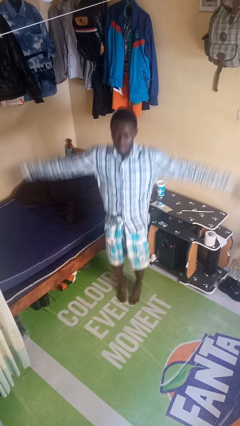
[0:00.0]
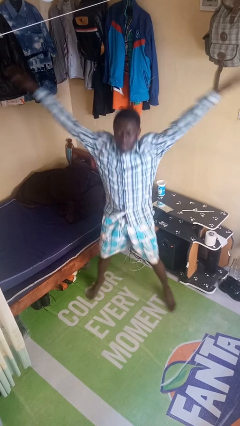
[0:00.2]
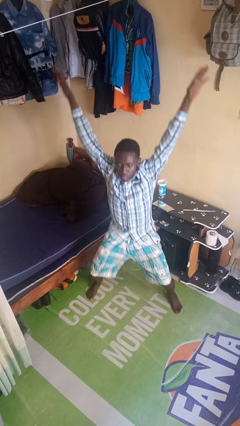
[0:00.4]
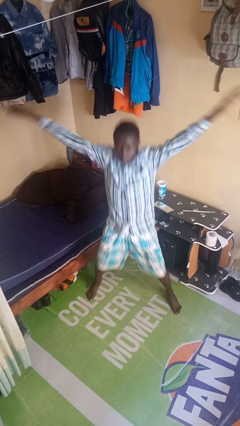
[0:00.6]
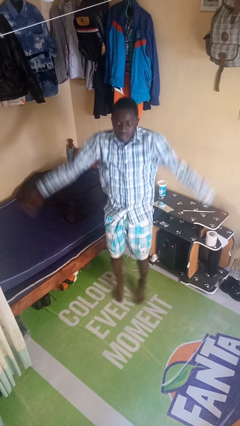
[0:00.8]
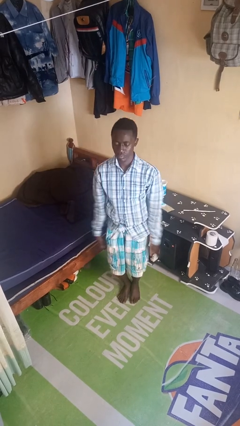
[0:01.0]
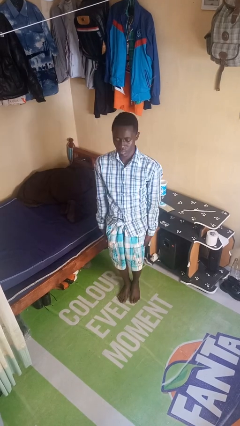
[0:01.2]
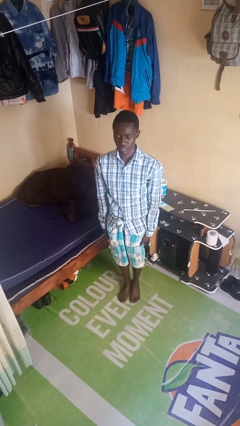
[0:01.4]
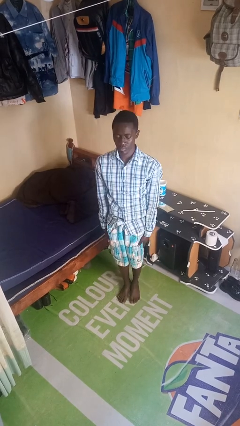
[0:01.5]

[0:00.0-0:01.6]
person exercises with jumping jacks

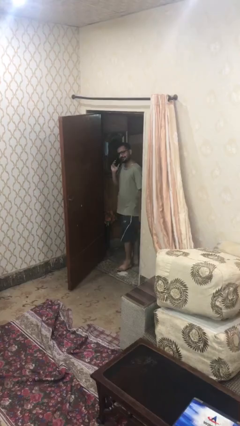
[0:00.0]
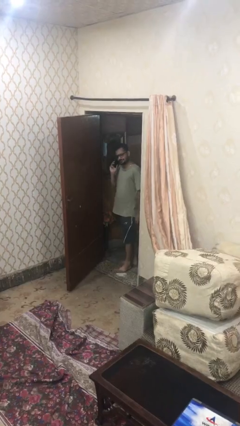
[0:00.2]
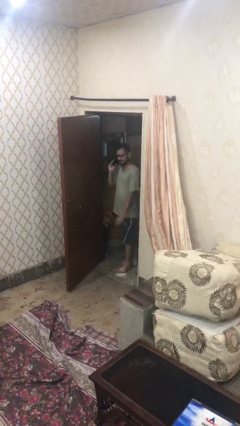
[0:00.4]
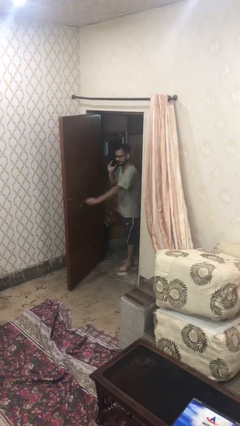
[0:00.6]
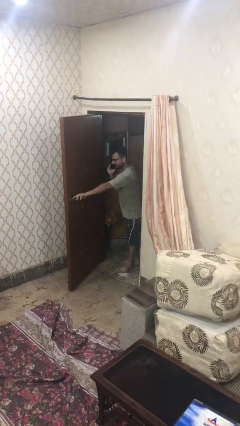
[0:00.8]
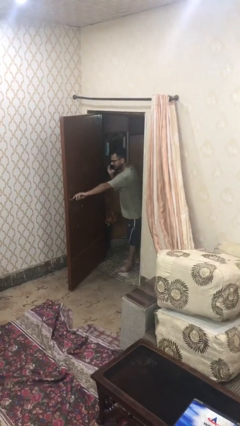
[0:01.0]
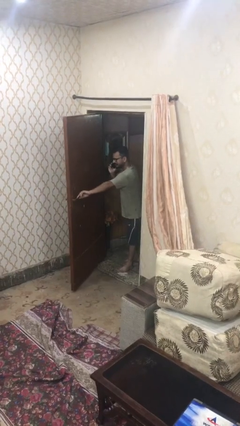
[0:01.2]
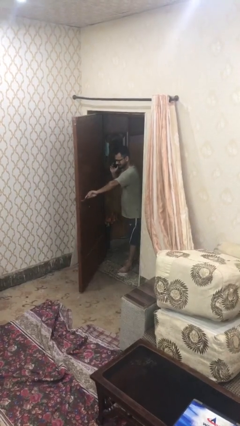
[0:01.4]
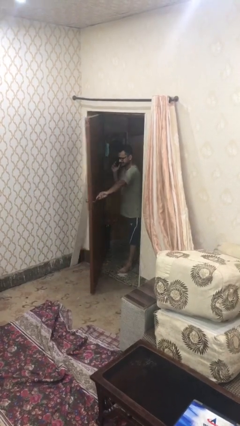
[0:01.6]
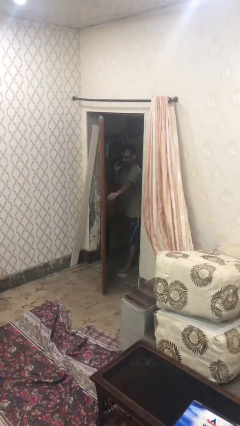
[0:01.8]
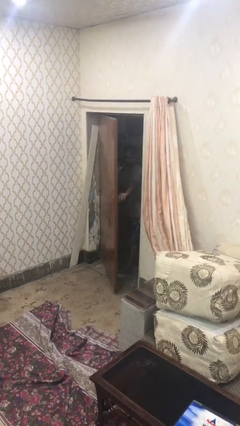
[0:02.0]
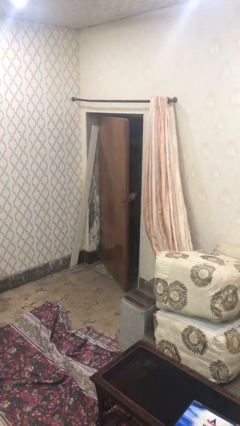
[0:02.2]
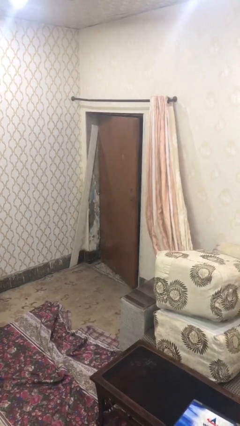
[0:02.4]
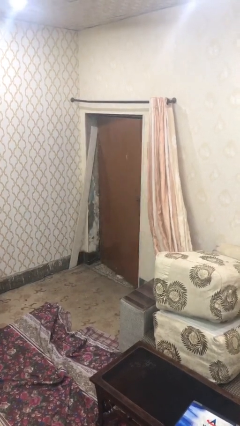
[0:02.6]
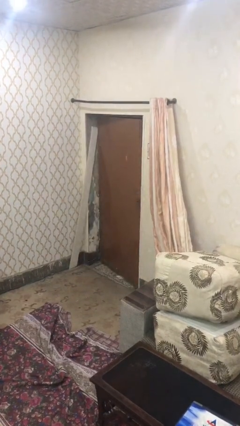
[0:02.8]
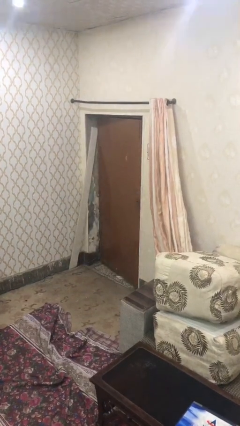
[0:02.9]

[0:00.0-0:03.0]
person closes facility door

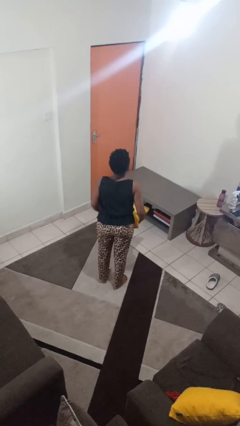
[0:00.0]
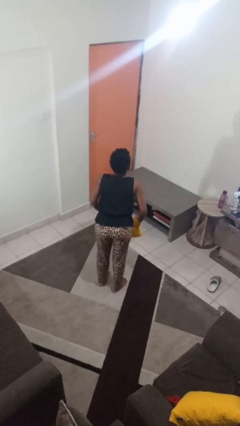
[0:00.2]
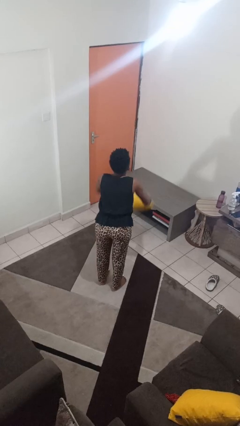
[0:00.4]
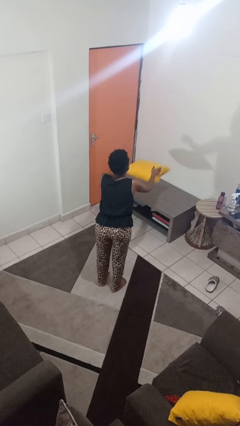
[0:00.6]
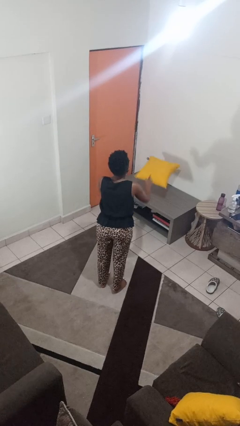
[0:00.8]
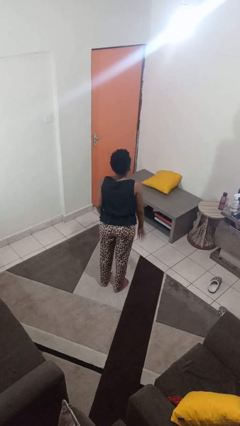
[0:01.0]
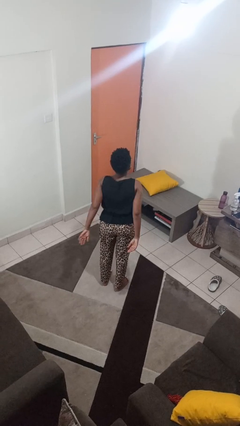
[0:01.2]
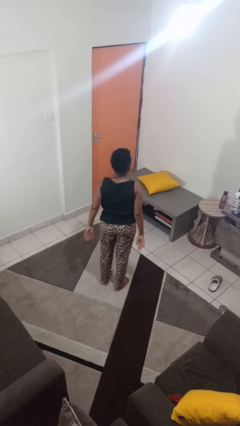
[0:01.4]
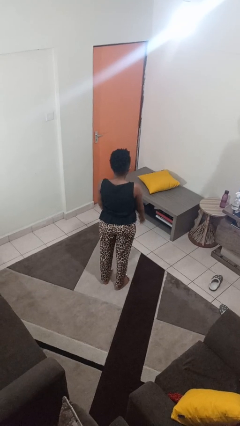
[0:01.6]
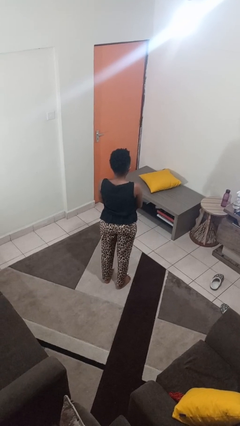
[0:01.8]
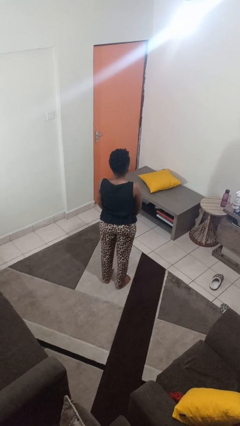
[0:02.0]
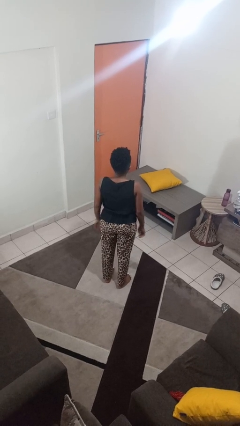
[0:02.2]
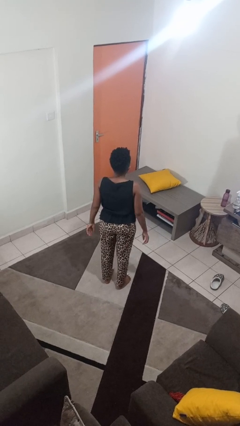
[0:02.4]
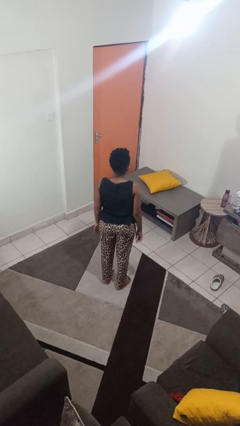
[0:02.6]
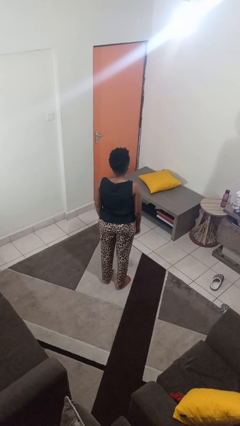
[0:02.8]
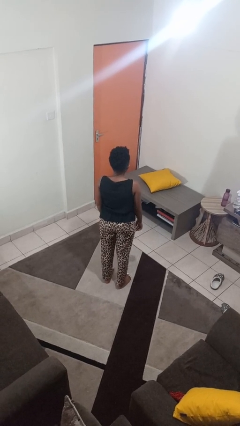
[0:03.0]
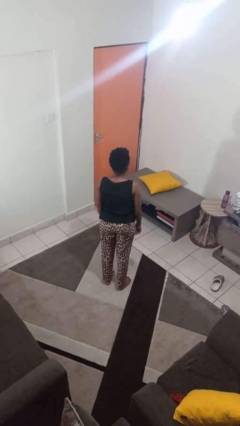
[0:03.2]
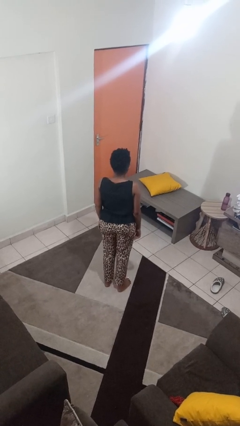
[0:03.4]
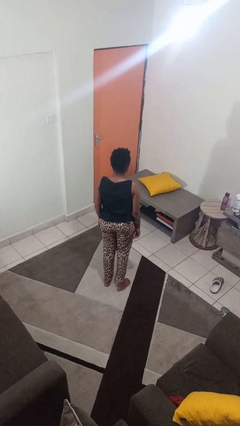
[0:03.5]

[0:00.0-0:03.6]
person throws object on table

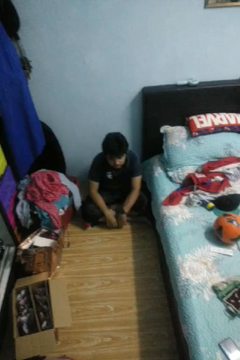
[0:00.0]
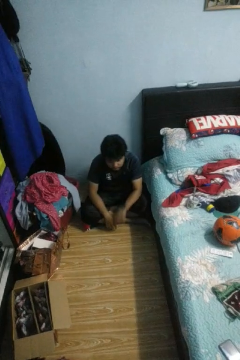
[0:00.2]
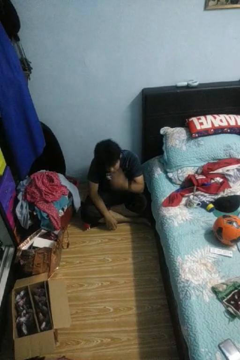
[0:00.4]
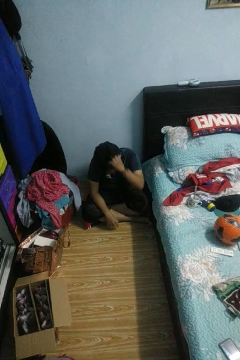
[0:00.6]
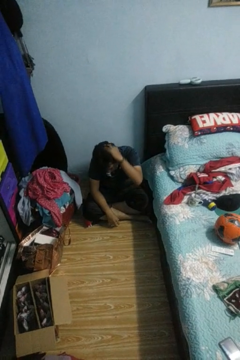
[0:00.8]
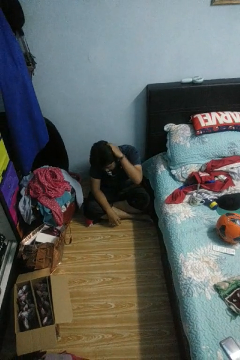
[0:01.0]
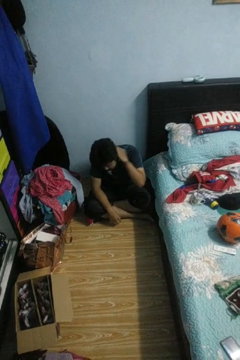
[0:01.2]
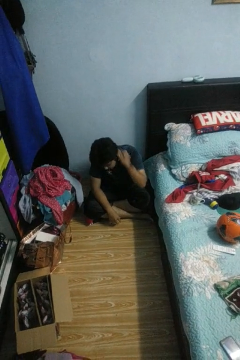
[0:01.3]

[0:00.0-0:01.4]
person strokes hair

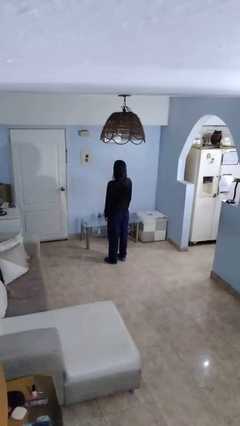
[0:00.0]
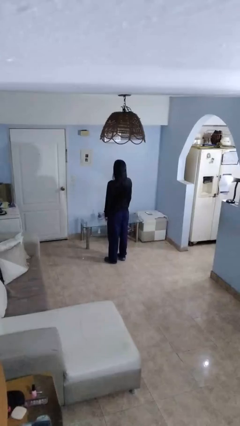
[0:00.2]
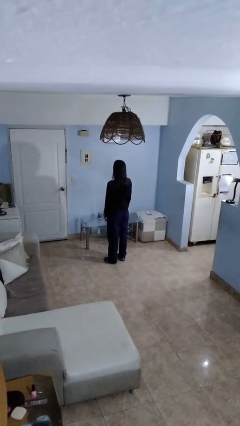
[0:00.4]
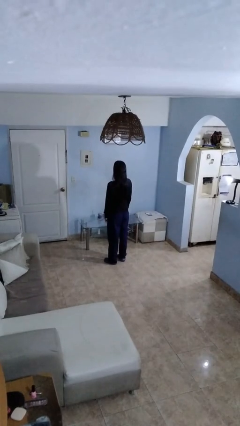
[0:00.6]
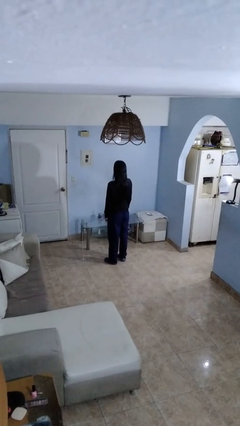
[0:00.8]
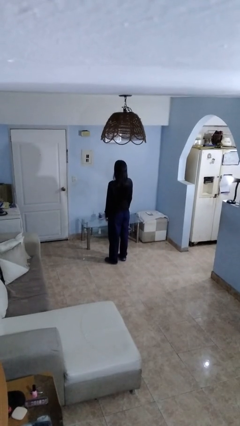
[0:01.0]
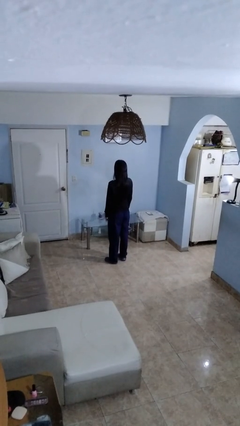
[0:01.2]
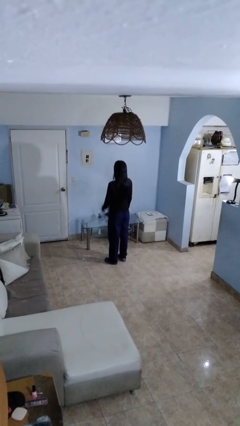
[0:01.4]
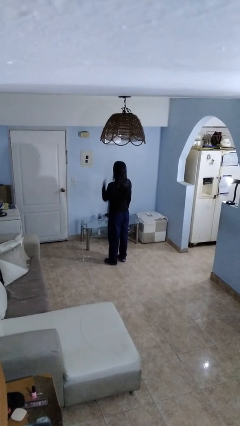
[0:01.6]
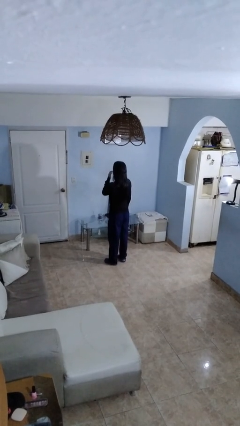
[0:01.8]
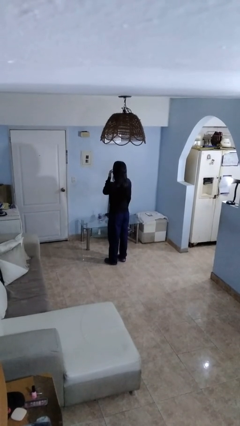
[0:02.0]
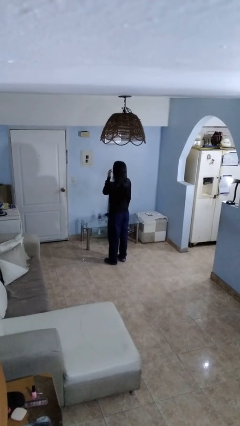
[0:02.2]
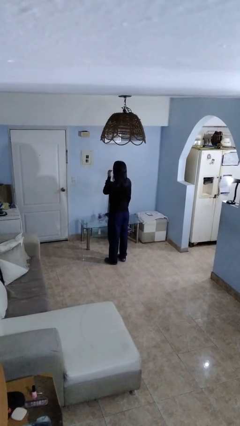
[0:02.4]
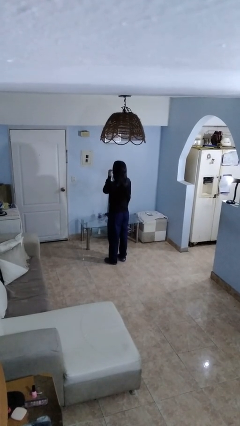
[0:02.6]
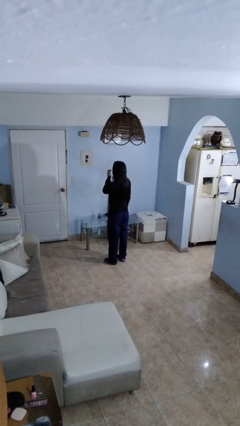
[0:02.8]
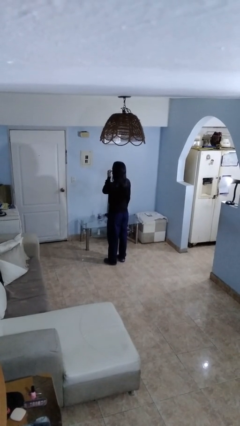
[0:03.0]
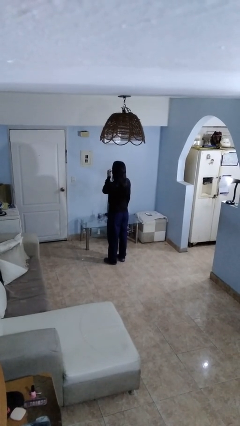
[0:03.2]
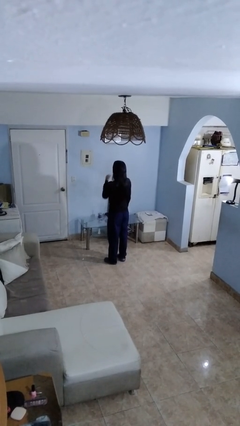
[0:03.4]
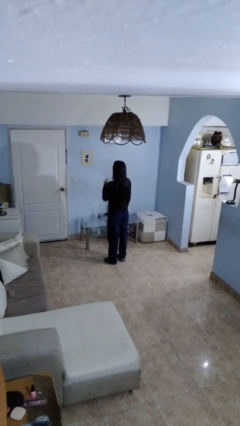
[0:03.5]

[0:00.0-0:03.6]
person licks fingers

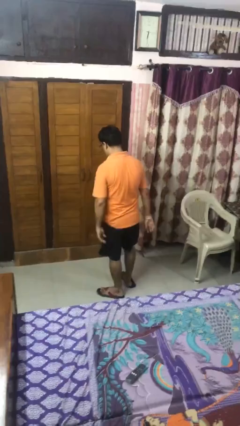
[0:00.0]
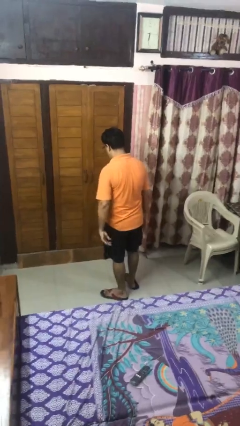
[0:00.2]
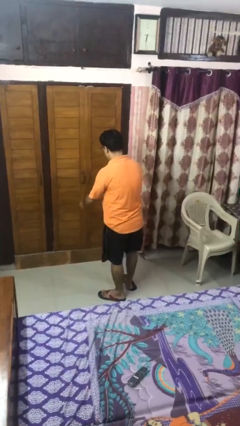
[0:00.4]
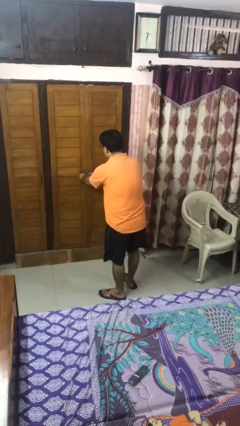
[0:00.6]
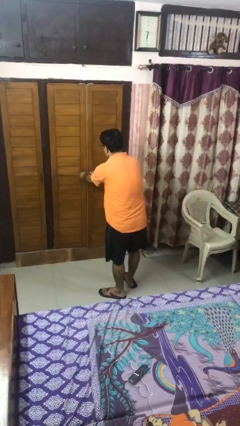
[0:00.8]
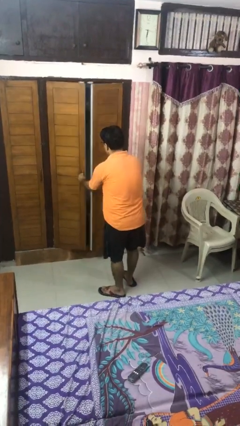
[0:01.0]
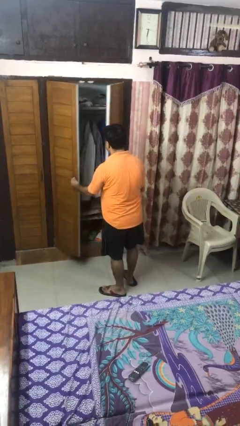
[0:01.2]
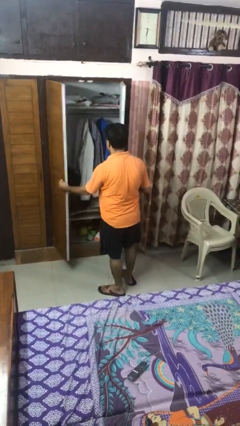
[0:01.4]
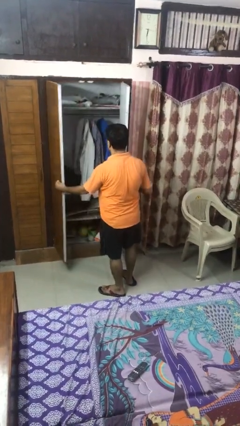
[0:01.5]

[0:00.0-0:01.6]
person opens closet door

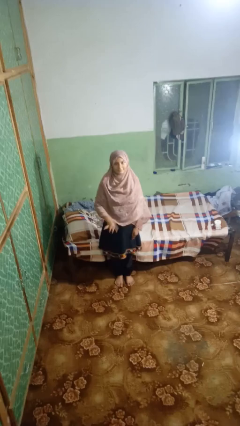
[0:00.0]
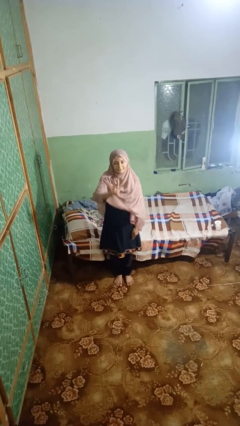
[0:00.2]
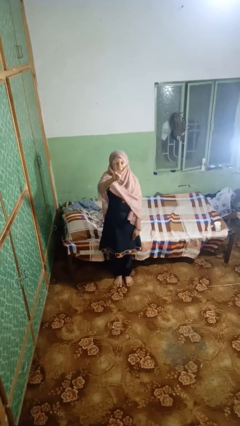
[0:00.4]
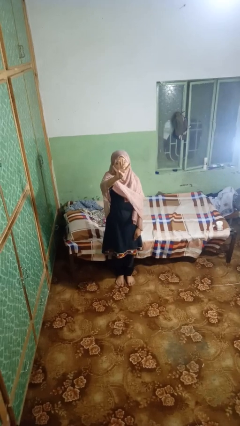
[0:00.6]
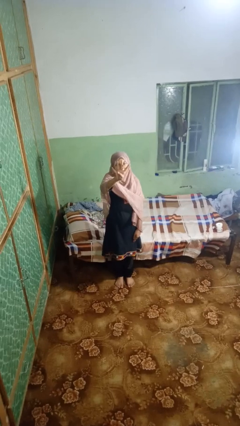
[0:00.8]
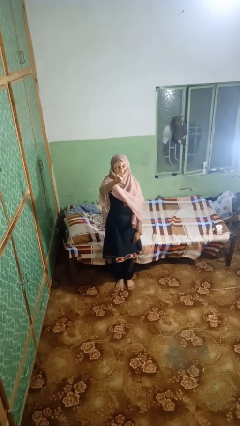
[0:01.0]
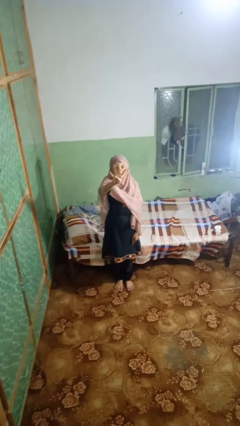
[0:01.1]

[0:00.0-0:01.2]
person gestures number four

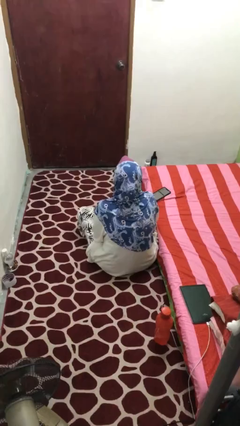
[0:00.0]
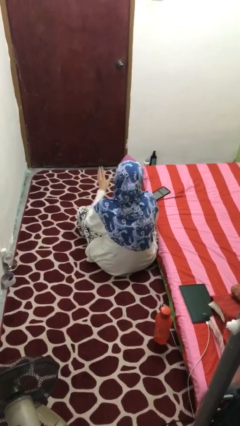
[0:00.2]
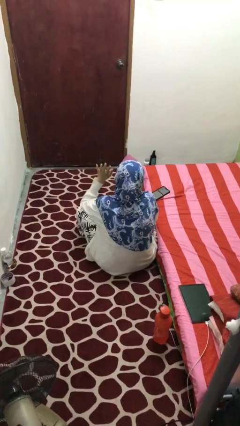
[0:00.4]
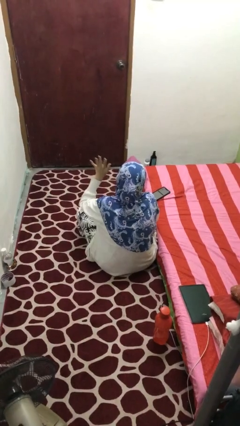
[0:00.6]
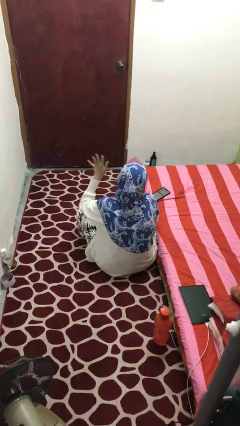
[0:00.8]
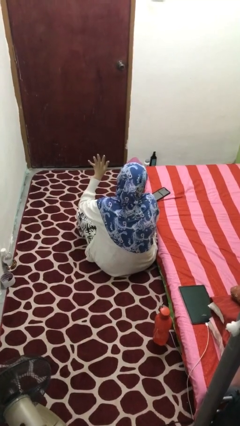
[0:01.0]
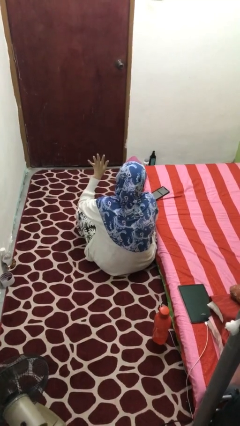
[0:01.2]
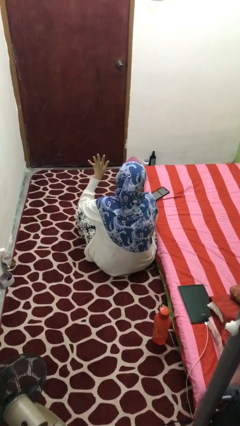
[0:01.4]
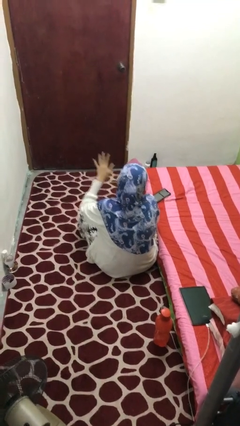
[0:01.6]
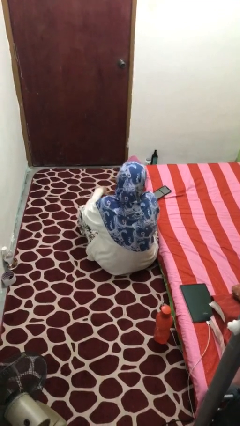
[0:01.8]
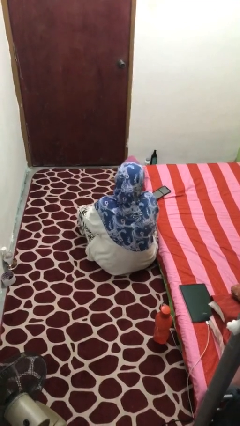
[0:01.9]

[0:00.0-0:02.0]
person gestures number five
